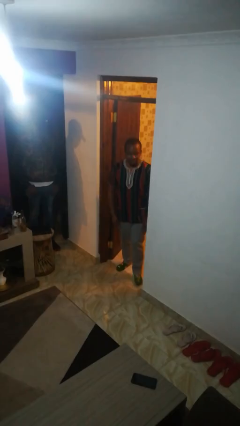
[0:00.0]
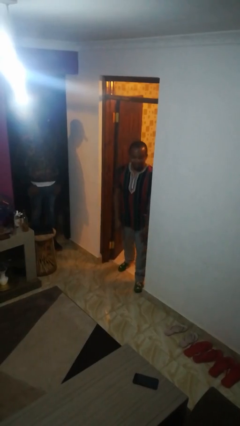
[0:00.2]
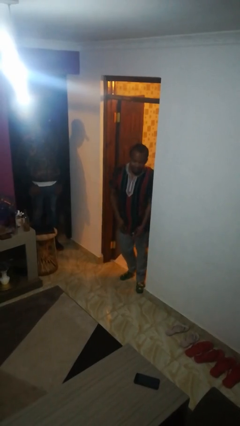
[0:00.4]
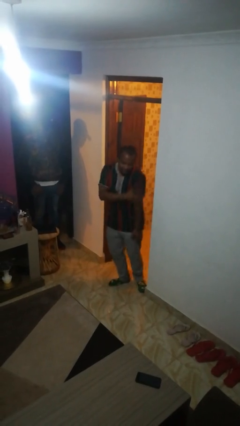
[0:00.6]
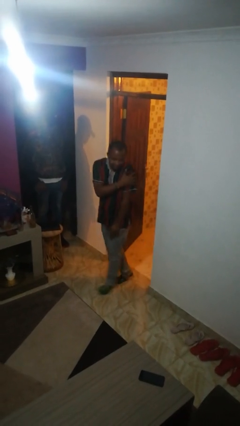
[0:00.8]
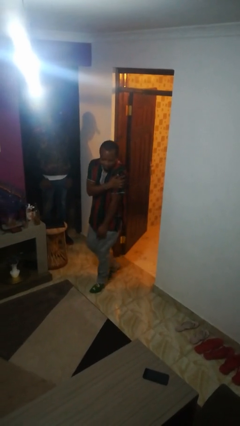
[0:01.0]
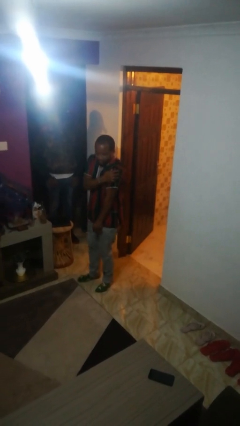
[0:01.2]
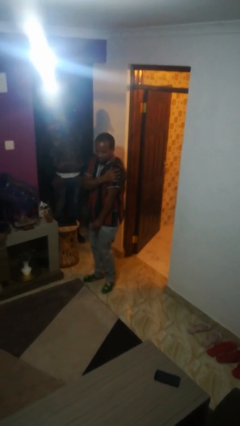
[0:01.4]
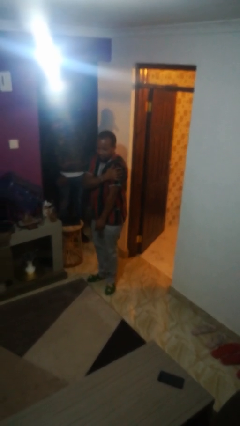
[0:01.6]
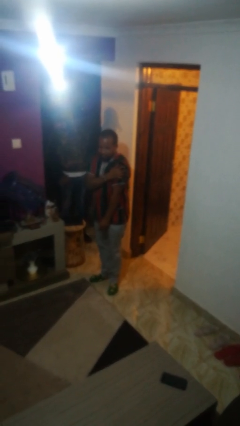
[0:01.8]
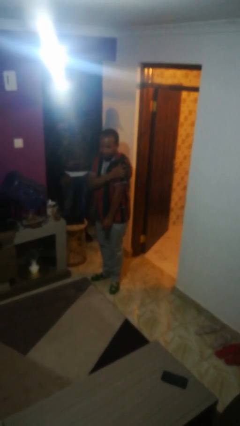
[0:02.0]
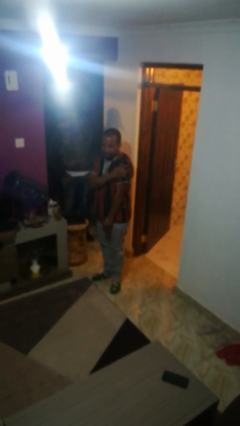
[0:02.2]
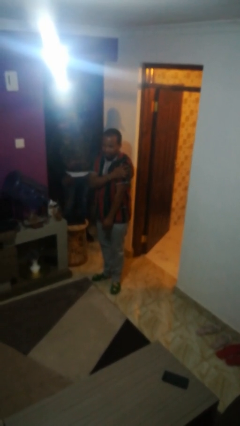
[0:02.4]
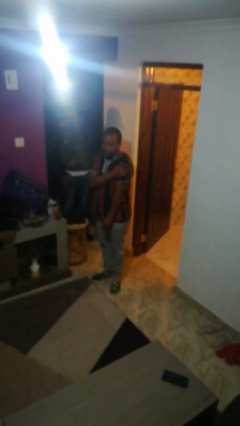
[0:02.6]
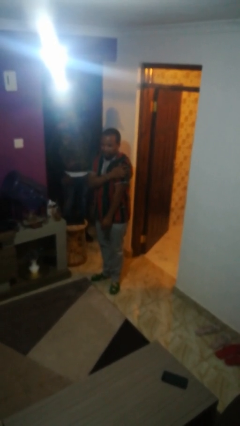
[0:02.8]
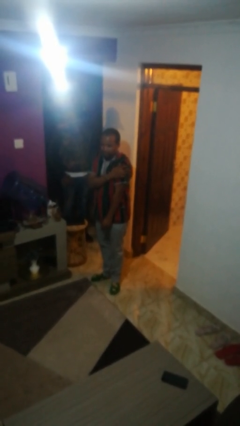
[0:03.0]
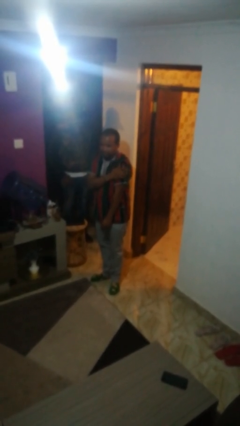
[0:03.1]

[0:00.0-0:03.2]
person bumps into wall

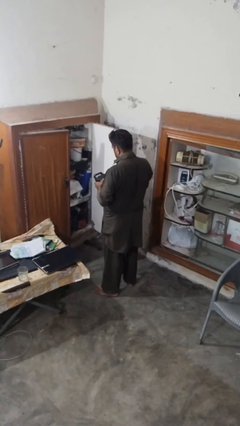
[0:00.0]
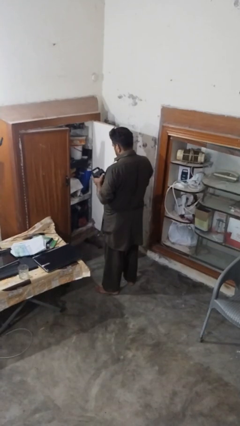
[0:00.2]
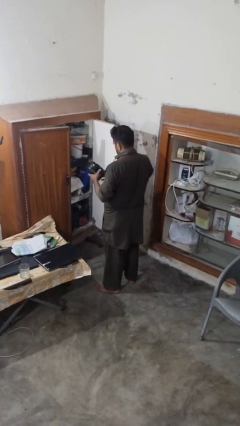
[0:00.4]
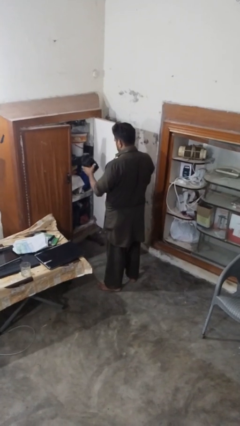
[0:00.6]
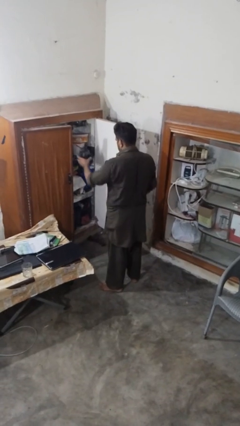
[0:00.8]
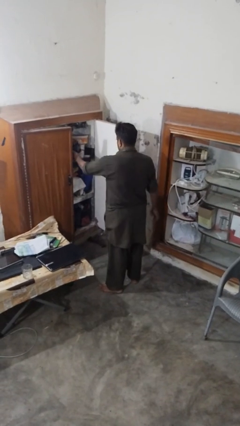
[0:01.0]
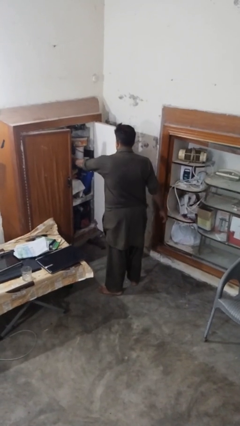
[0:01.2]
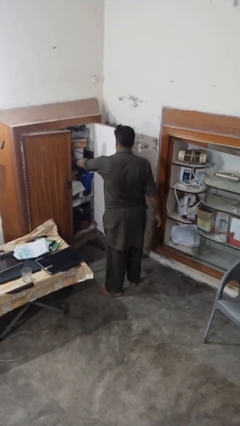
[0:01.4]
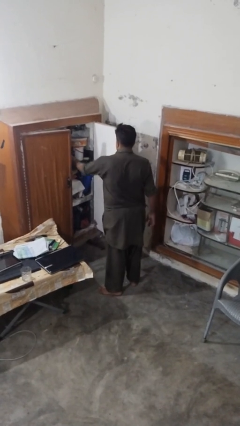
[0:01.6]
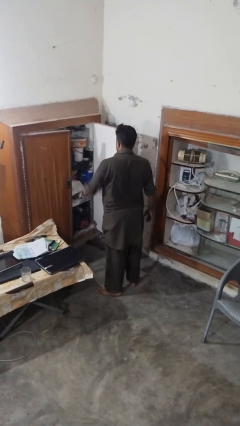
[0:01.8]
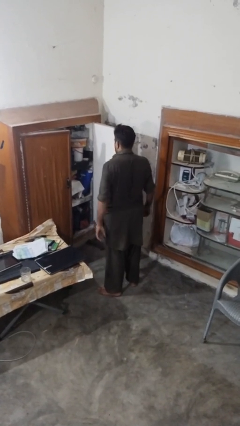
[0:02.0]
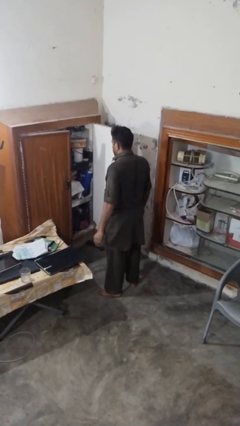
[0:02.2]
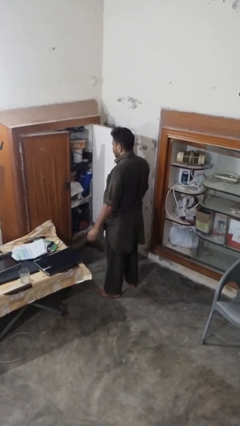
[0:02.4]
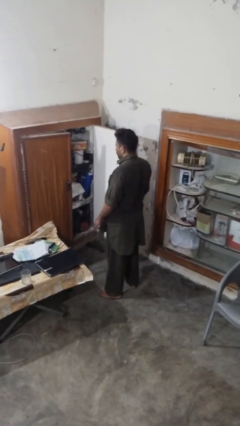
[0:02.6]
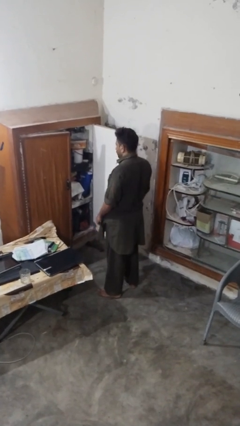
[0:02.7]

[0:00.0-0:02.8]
person puts down object into cabinet

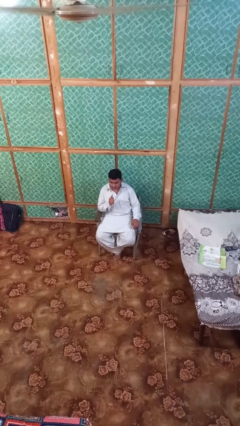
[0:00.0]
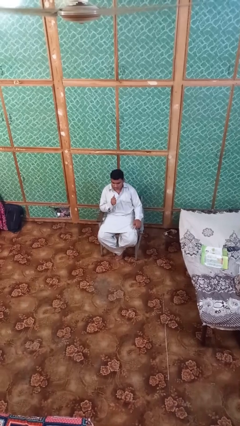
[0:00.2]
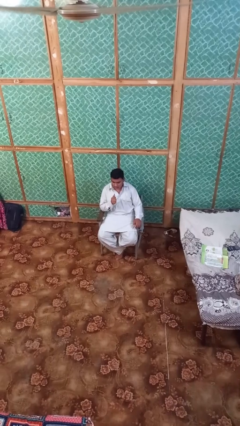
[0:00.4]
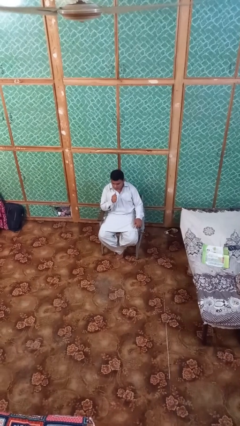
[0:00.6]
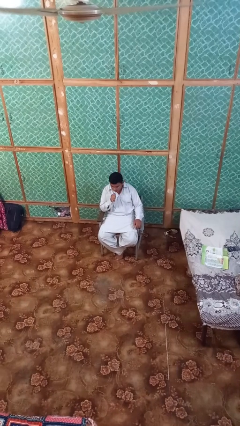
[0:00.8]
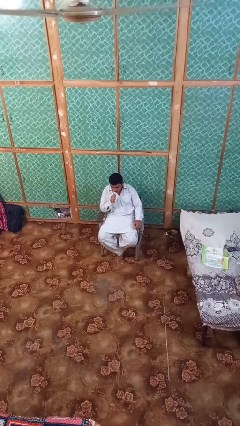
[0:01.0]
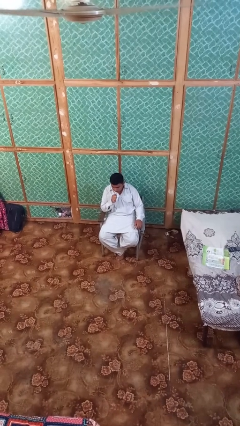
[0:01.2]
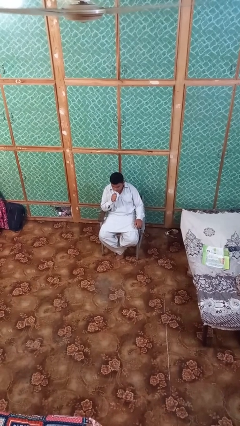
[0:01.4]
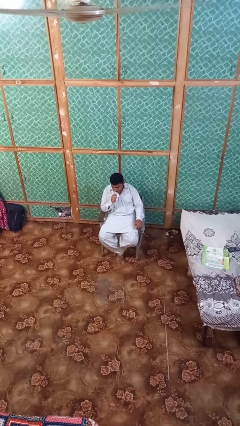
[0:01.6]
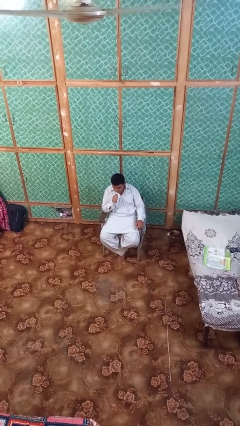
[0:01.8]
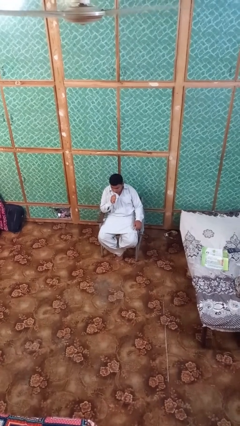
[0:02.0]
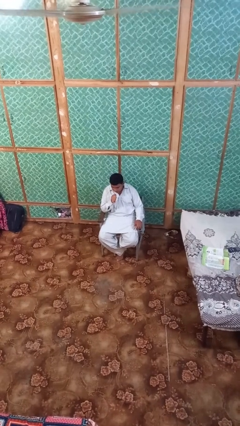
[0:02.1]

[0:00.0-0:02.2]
person vapes

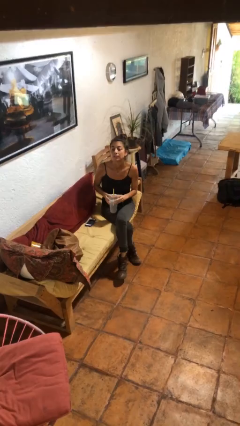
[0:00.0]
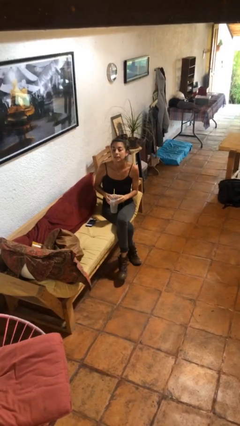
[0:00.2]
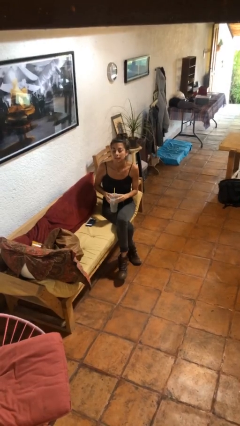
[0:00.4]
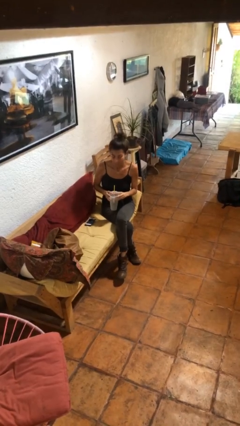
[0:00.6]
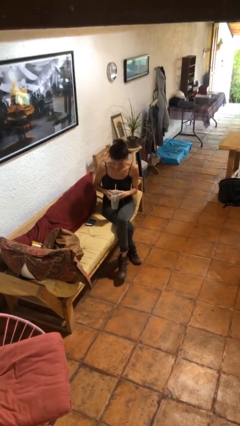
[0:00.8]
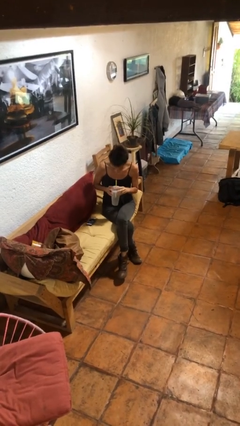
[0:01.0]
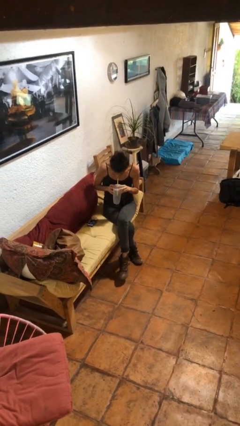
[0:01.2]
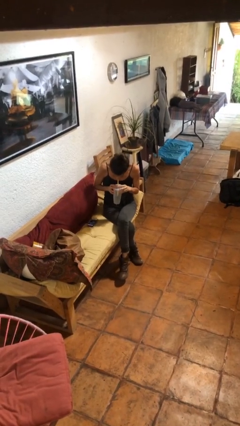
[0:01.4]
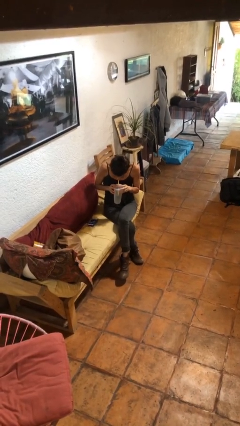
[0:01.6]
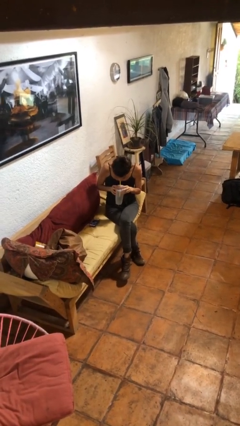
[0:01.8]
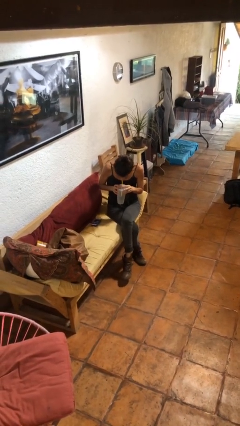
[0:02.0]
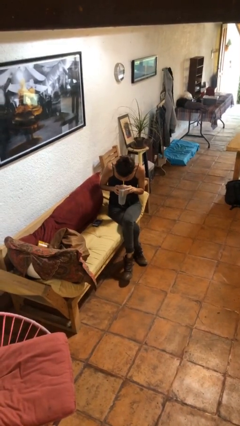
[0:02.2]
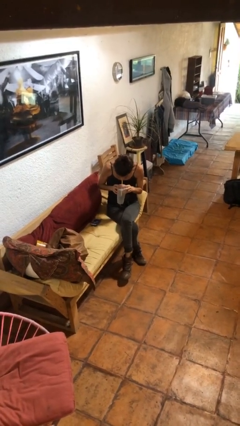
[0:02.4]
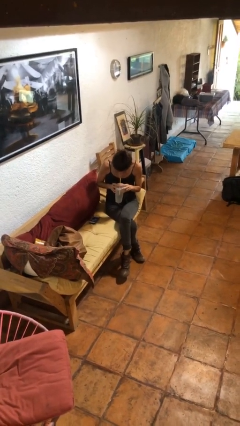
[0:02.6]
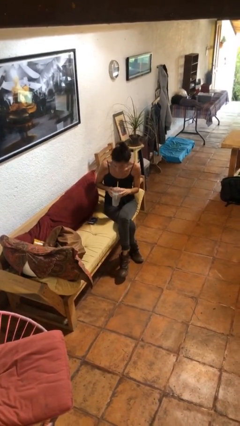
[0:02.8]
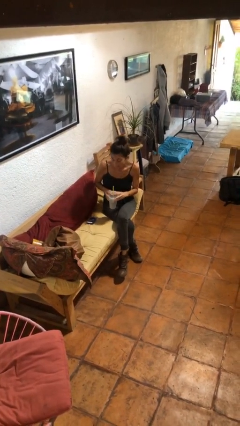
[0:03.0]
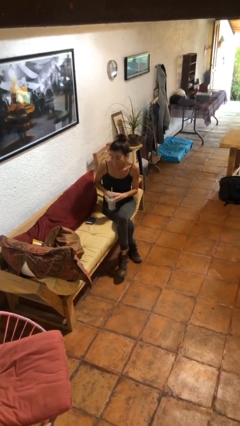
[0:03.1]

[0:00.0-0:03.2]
person drinks from straw

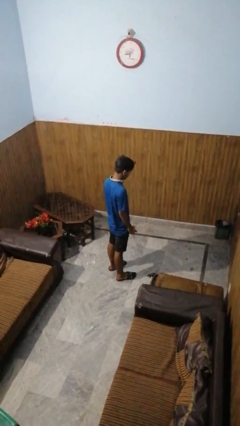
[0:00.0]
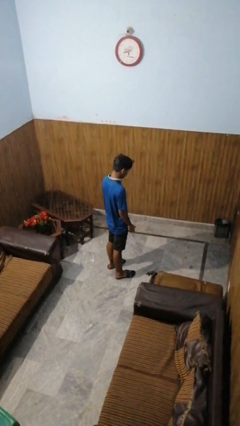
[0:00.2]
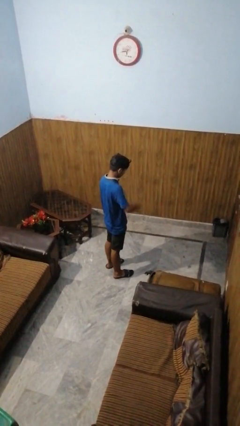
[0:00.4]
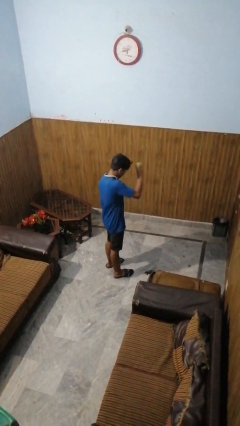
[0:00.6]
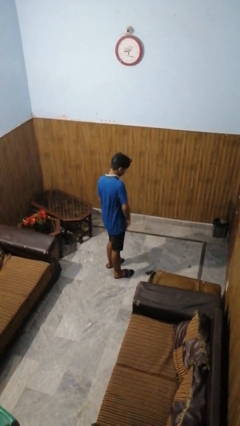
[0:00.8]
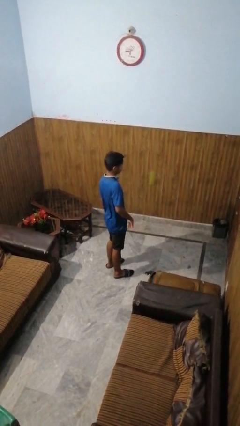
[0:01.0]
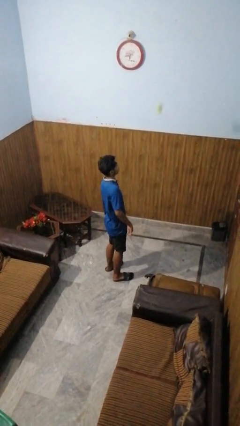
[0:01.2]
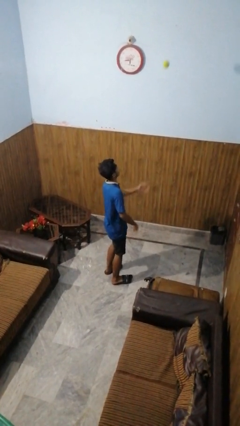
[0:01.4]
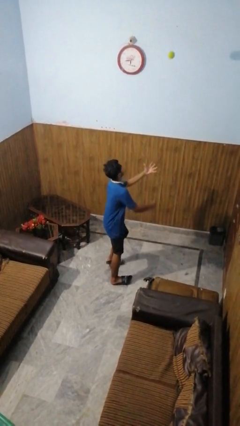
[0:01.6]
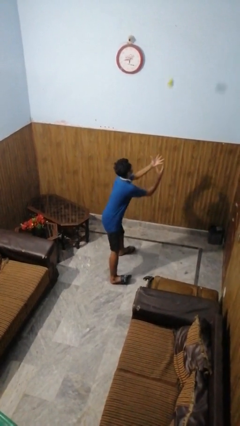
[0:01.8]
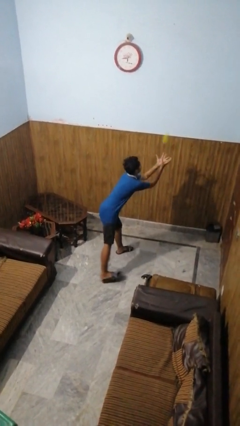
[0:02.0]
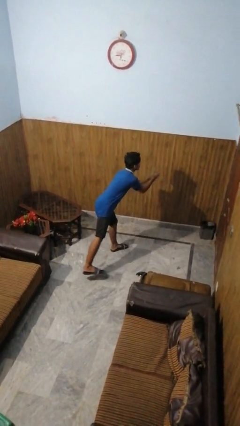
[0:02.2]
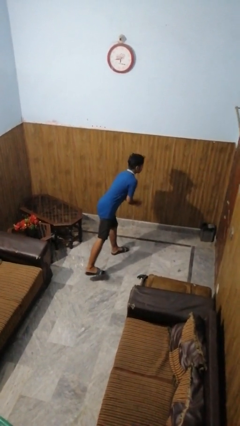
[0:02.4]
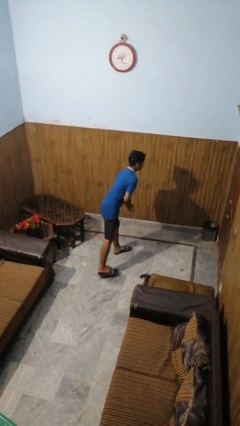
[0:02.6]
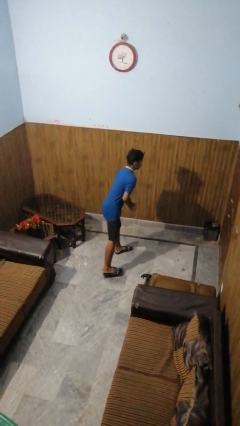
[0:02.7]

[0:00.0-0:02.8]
person bounces ball on floor

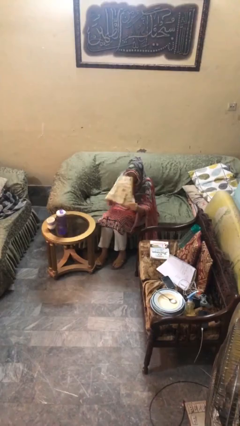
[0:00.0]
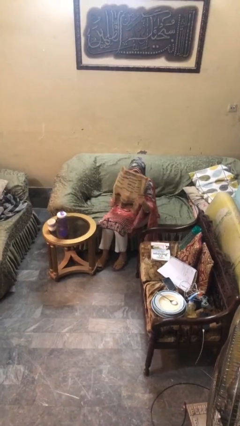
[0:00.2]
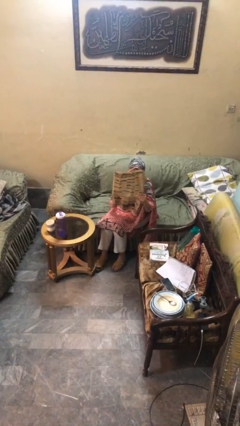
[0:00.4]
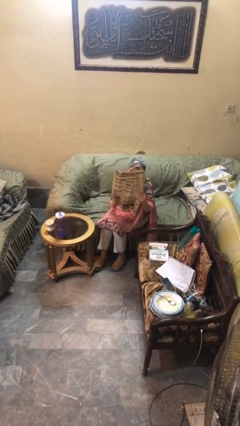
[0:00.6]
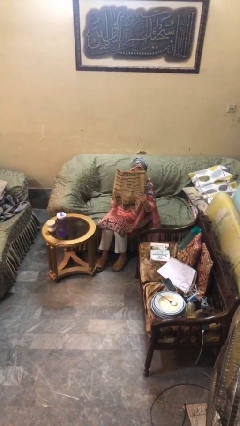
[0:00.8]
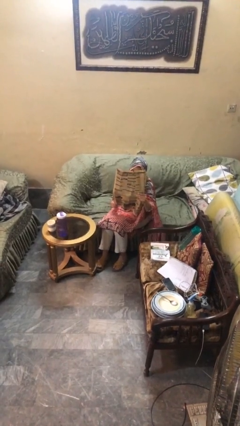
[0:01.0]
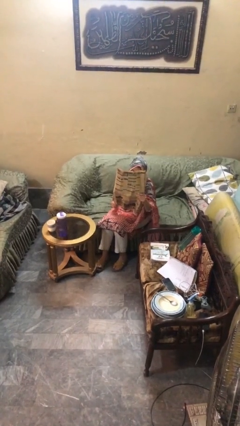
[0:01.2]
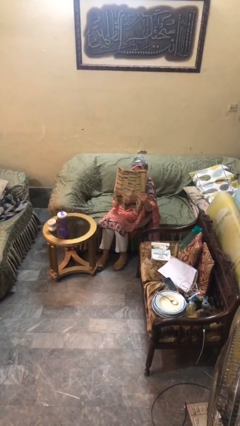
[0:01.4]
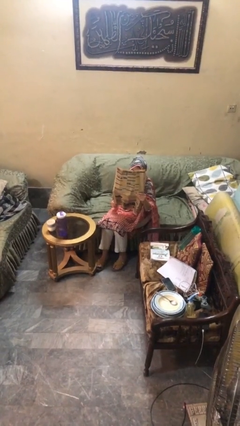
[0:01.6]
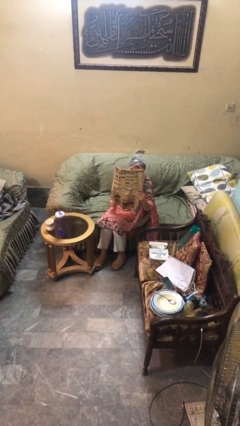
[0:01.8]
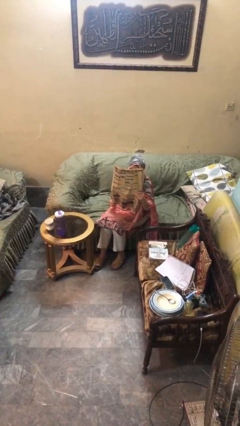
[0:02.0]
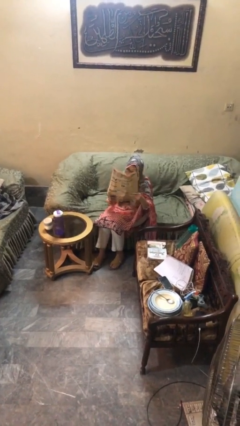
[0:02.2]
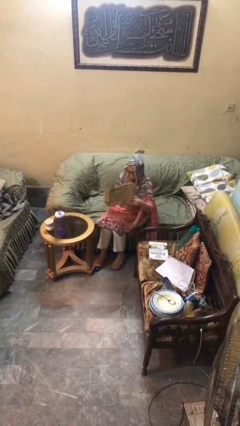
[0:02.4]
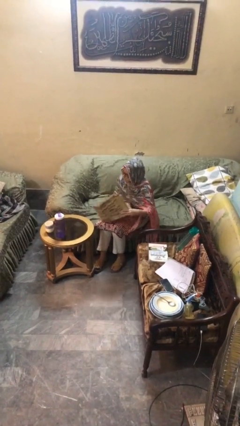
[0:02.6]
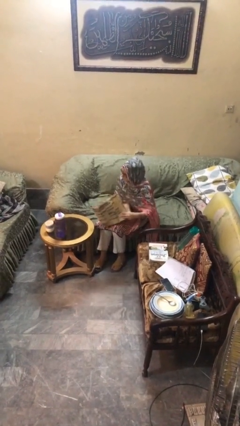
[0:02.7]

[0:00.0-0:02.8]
person reads newspaper
